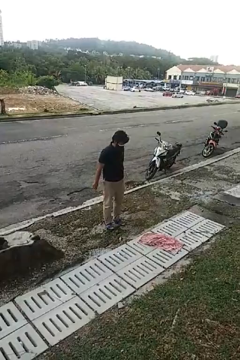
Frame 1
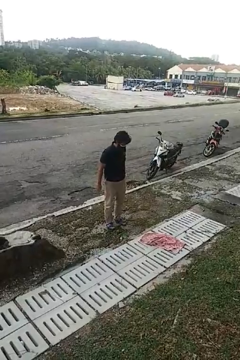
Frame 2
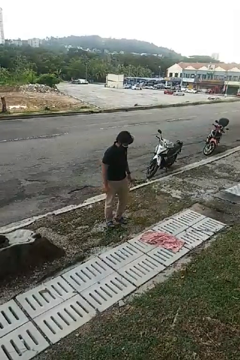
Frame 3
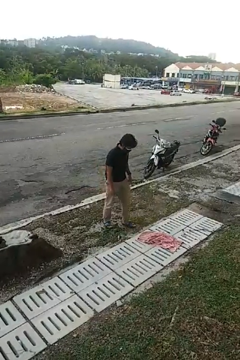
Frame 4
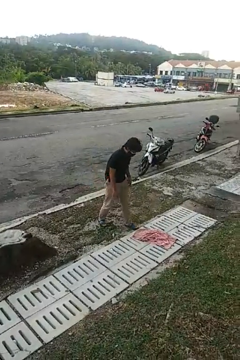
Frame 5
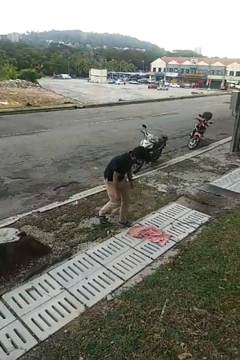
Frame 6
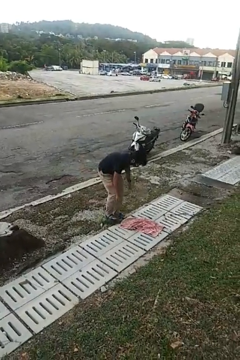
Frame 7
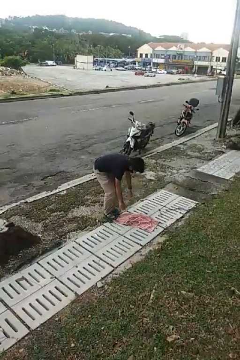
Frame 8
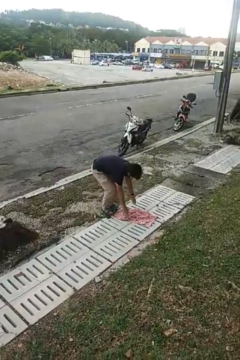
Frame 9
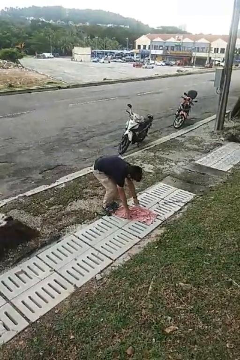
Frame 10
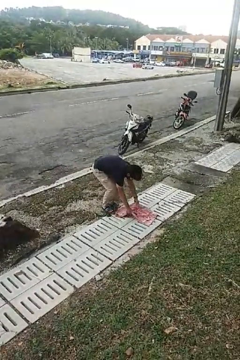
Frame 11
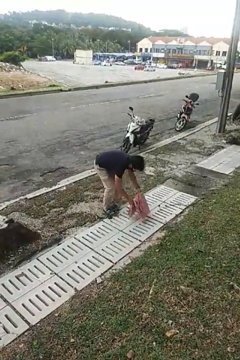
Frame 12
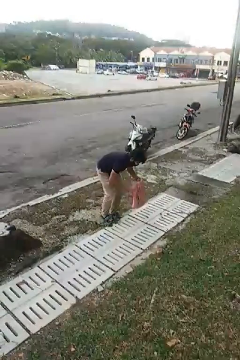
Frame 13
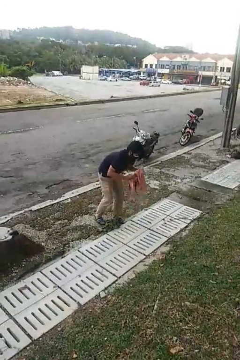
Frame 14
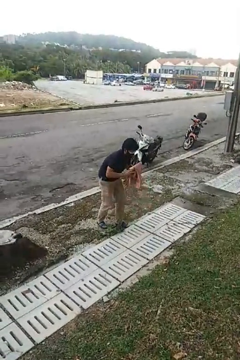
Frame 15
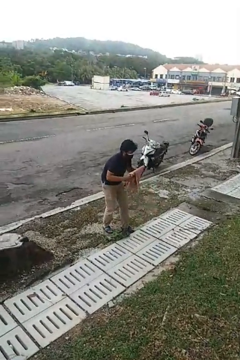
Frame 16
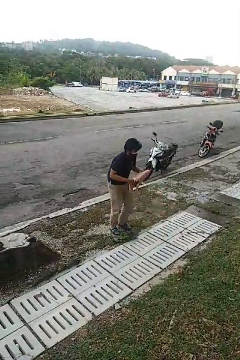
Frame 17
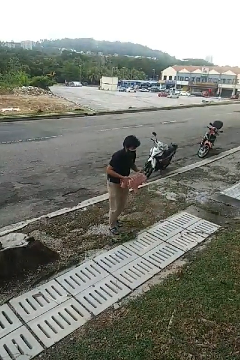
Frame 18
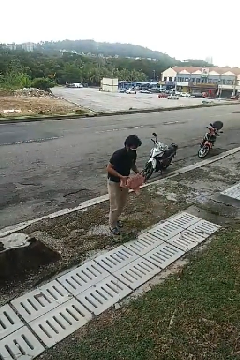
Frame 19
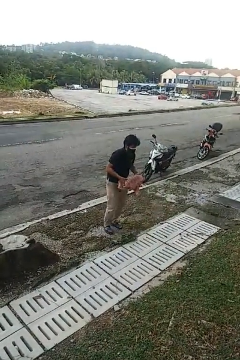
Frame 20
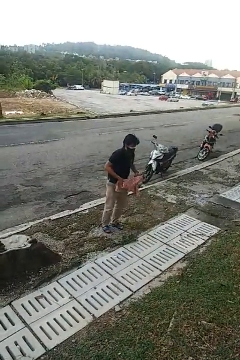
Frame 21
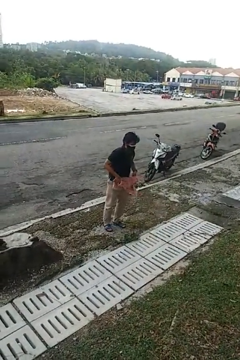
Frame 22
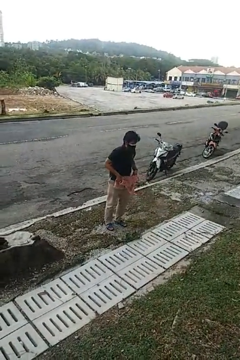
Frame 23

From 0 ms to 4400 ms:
person picks up object from floor

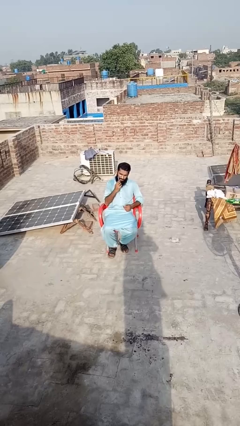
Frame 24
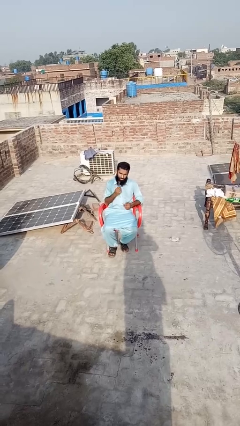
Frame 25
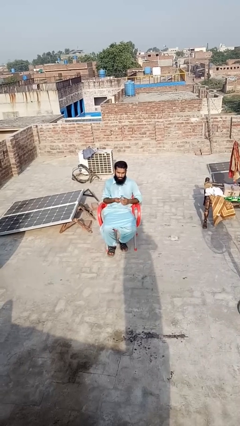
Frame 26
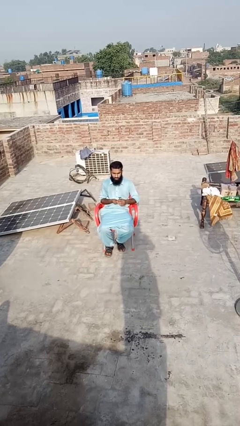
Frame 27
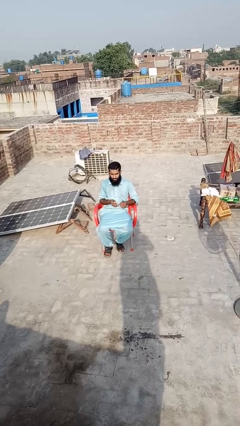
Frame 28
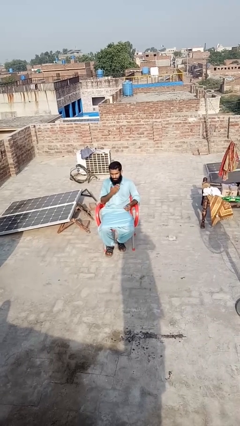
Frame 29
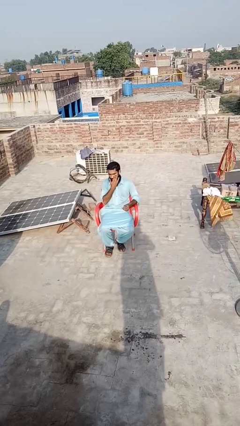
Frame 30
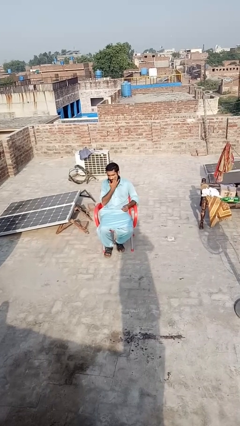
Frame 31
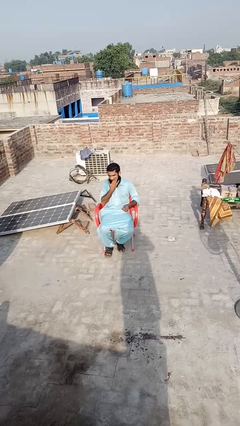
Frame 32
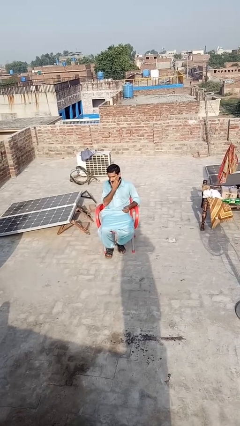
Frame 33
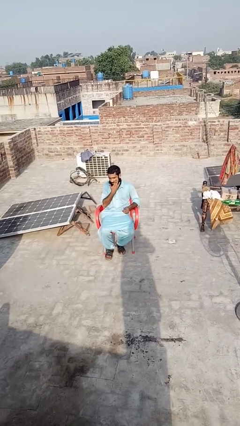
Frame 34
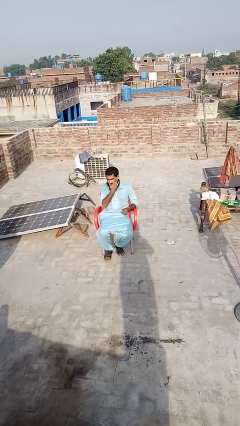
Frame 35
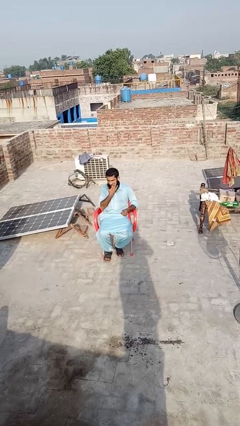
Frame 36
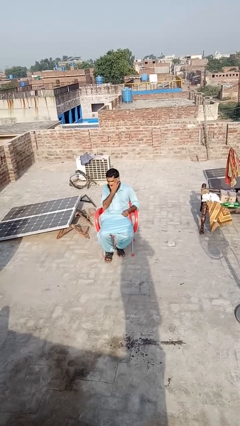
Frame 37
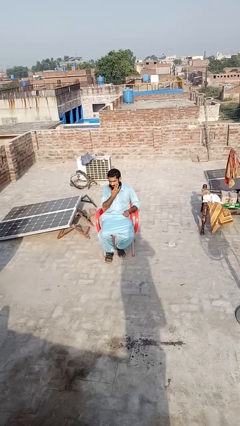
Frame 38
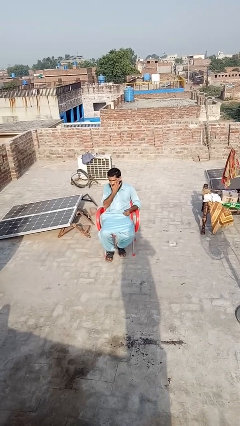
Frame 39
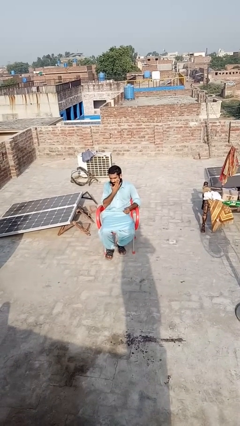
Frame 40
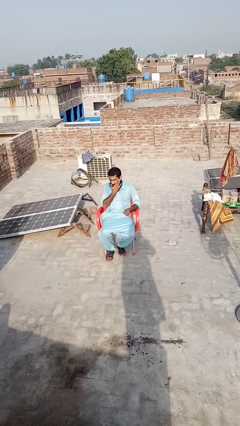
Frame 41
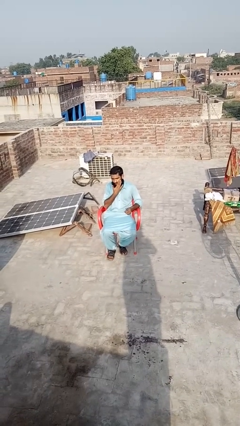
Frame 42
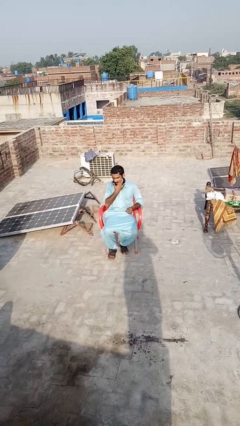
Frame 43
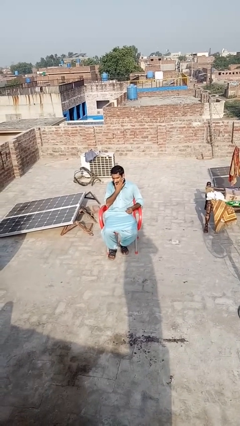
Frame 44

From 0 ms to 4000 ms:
person applies shaving cream

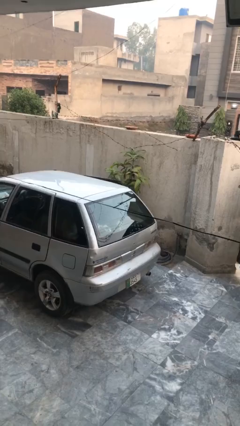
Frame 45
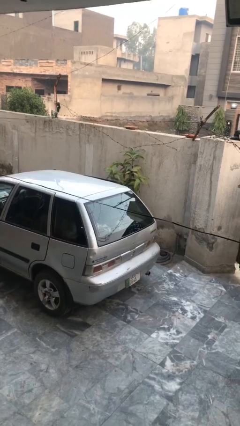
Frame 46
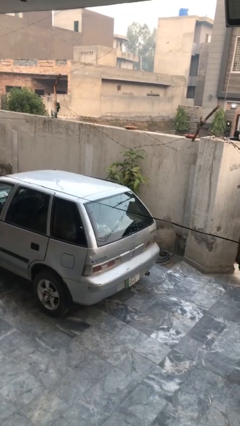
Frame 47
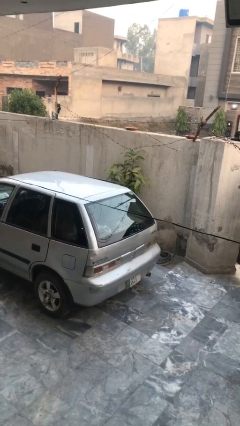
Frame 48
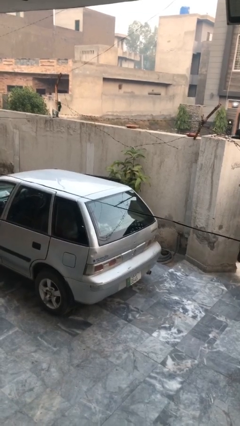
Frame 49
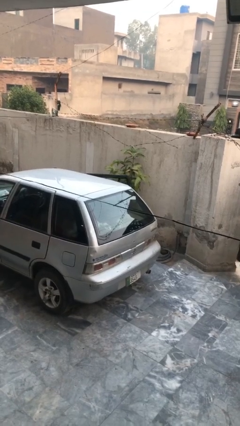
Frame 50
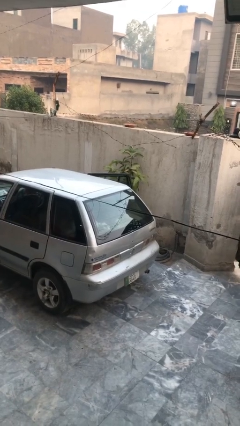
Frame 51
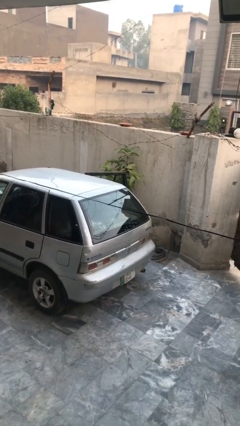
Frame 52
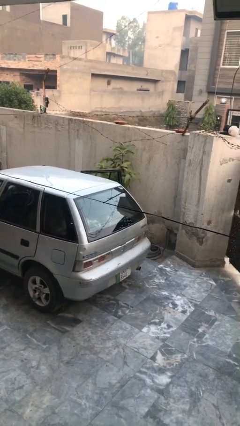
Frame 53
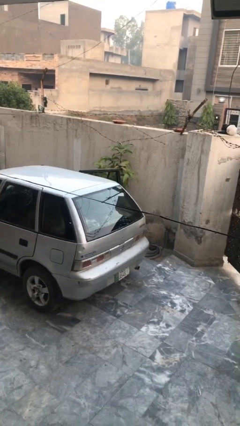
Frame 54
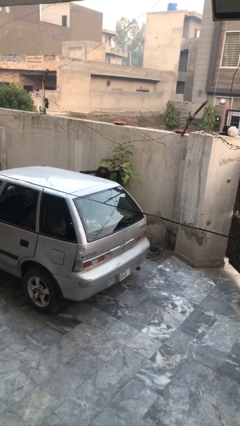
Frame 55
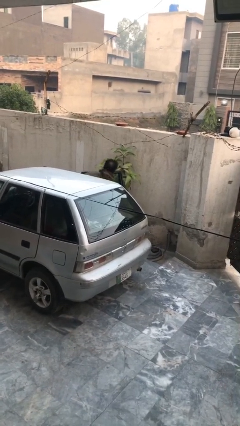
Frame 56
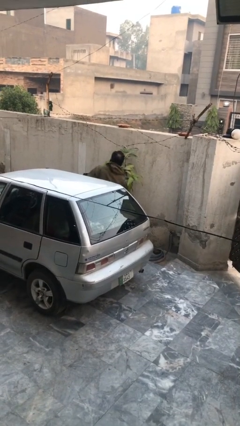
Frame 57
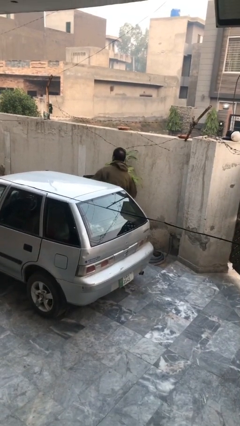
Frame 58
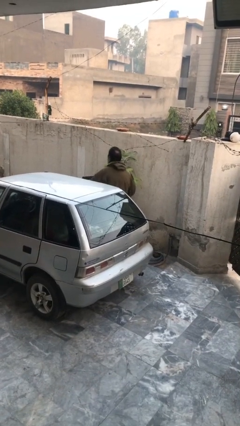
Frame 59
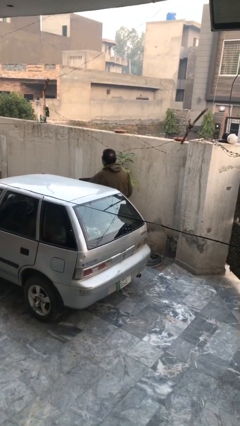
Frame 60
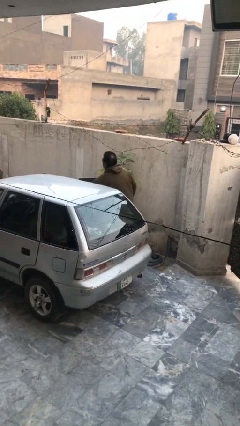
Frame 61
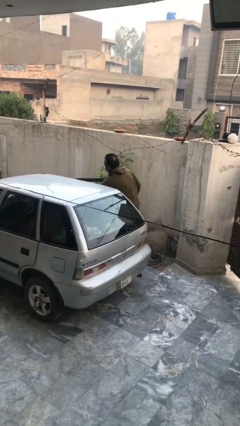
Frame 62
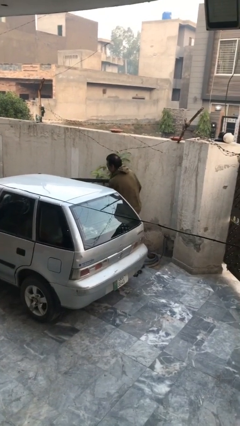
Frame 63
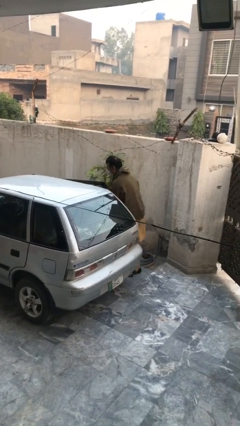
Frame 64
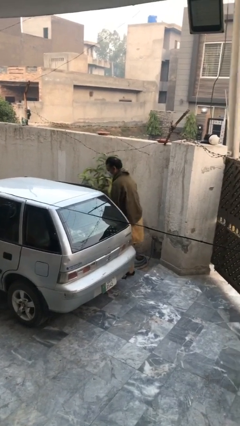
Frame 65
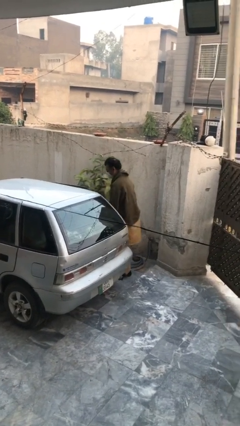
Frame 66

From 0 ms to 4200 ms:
car drops off person

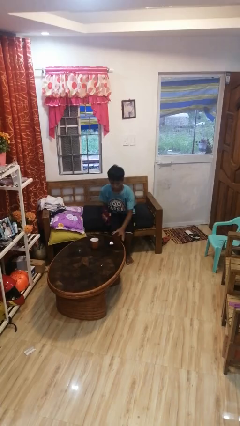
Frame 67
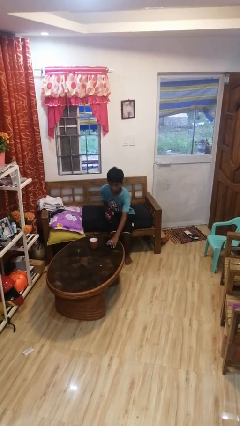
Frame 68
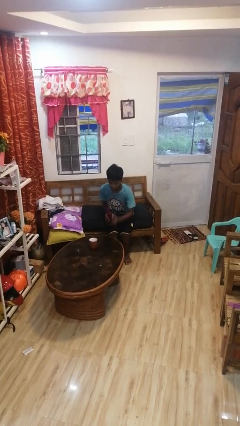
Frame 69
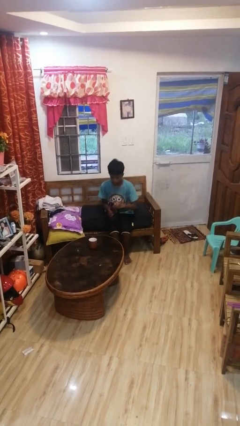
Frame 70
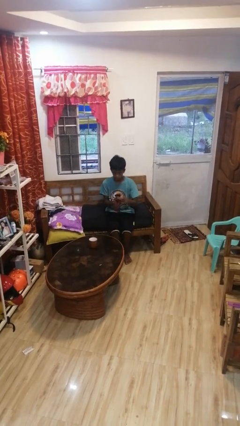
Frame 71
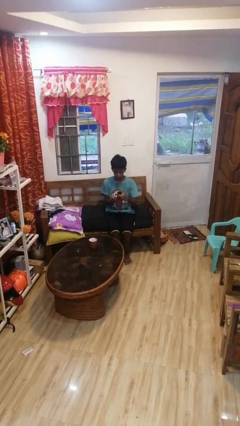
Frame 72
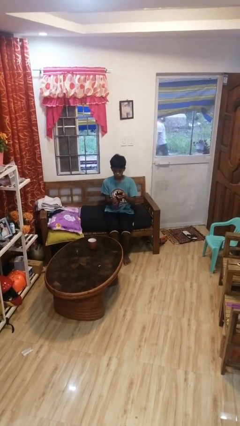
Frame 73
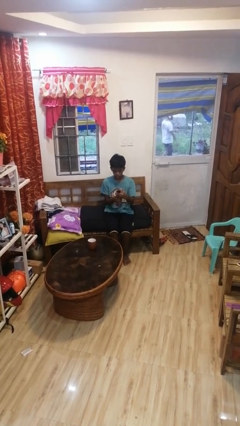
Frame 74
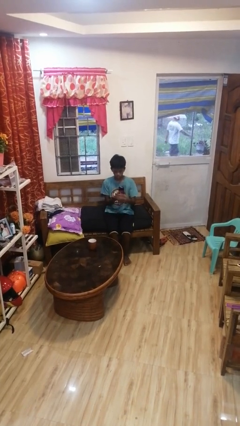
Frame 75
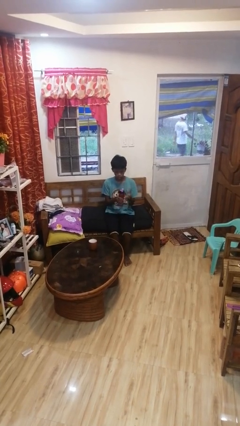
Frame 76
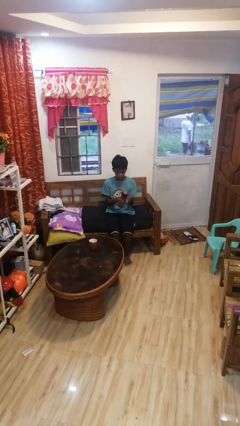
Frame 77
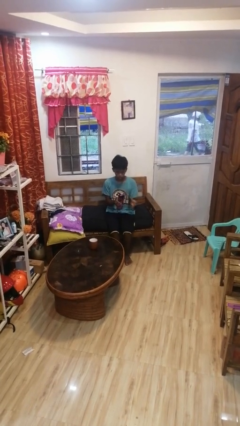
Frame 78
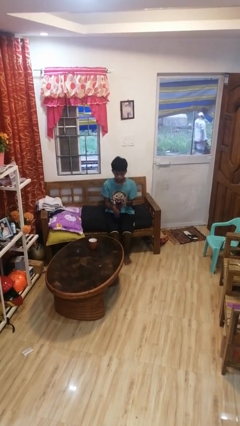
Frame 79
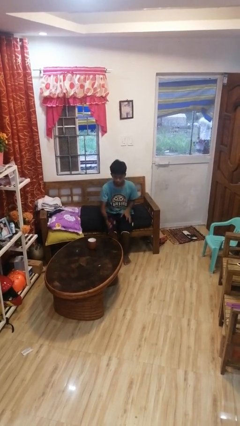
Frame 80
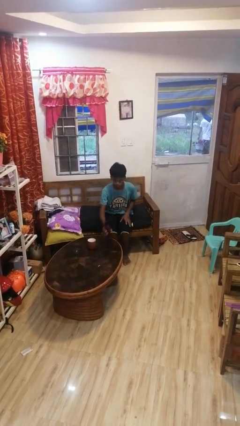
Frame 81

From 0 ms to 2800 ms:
person screws lid to bottle

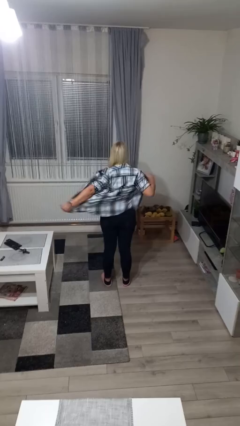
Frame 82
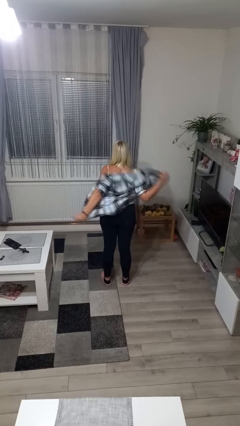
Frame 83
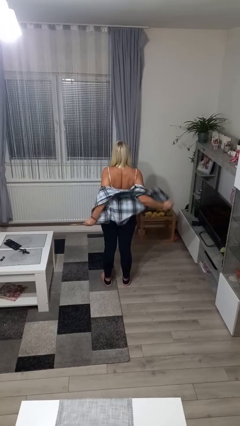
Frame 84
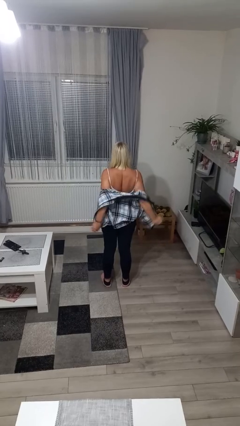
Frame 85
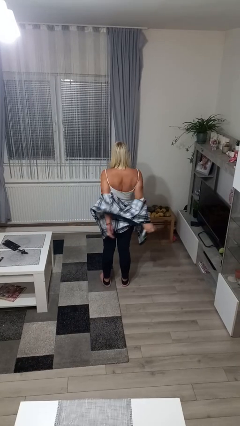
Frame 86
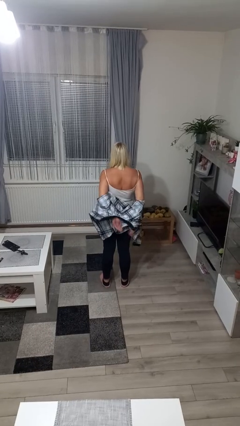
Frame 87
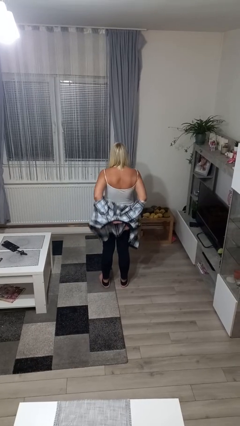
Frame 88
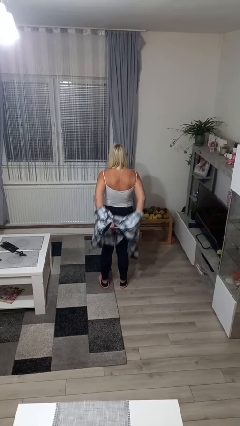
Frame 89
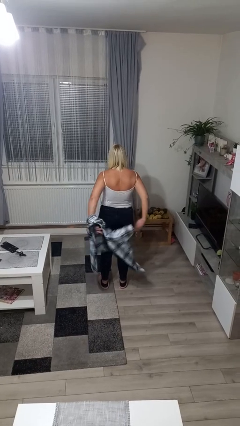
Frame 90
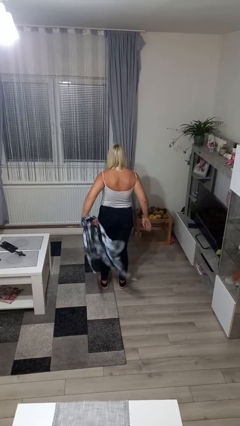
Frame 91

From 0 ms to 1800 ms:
person takes off shirt

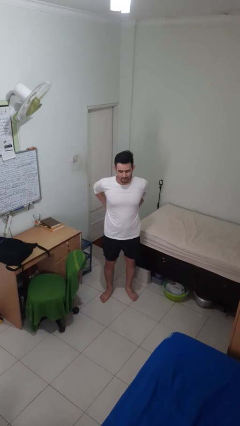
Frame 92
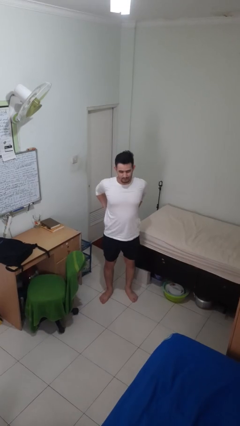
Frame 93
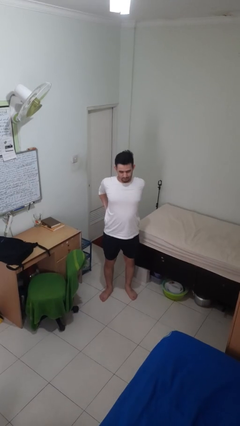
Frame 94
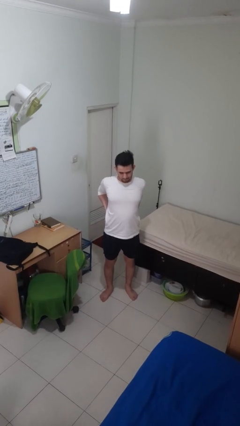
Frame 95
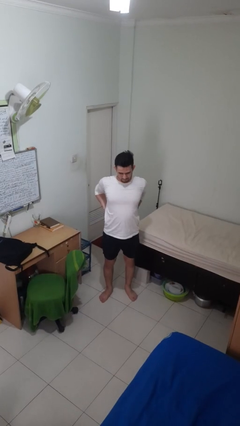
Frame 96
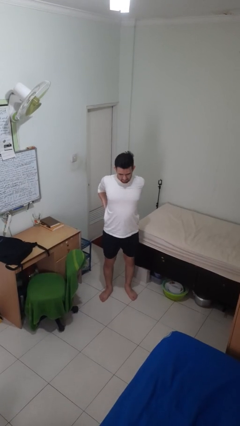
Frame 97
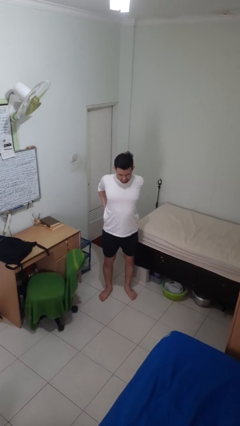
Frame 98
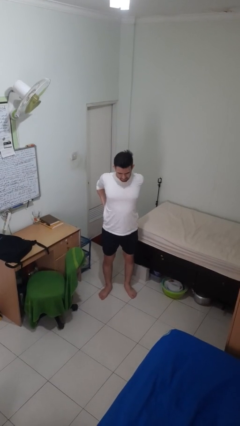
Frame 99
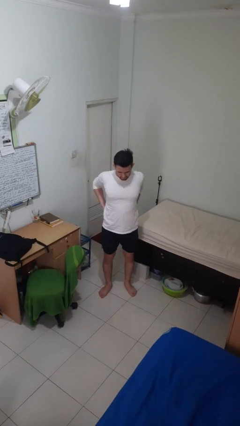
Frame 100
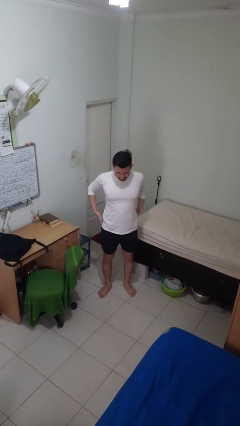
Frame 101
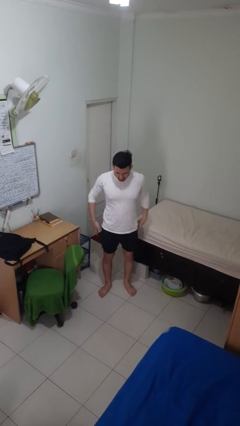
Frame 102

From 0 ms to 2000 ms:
person stretches back
